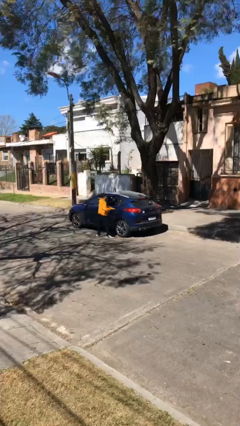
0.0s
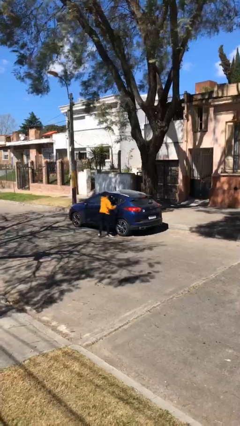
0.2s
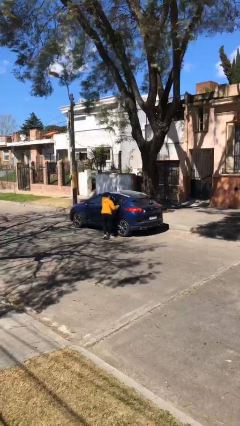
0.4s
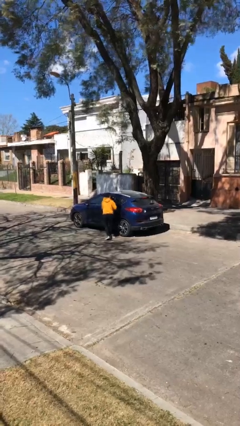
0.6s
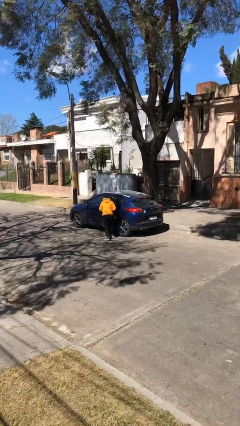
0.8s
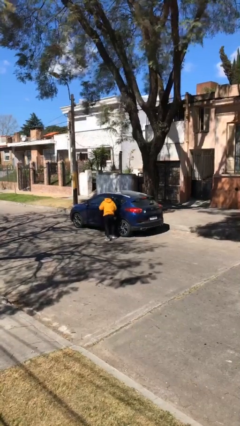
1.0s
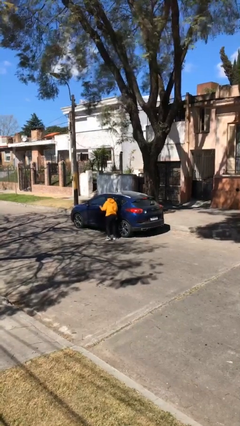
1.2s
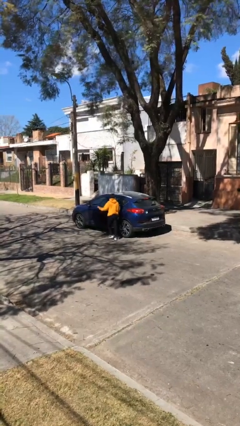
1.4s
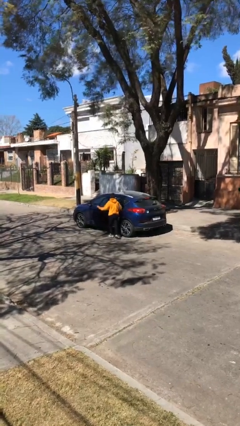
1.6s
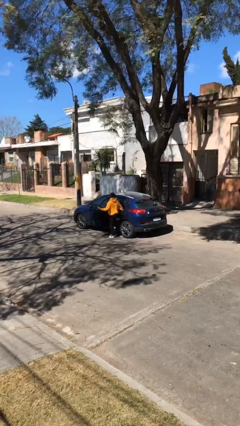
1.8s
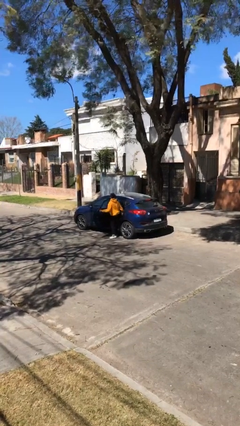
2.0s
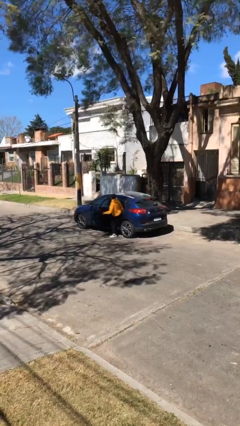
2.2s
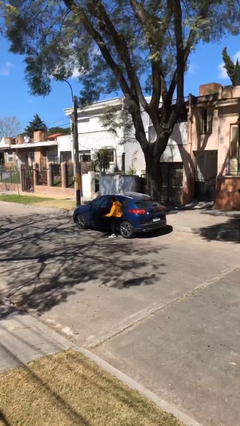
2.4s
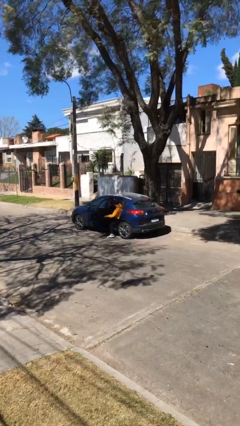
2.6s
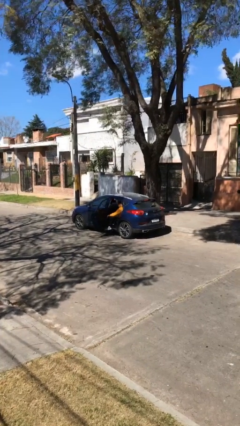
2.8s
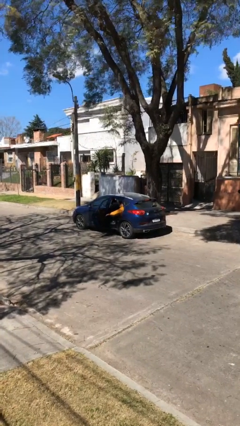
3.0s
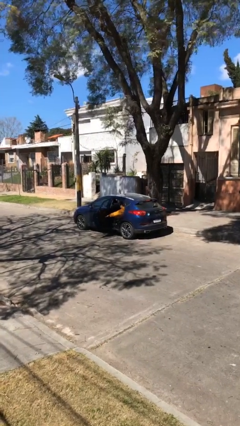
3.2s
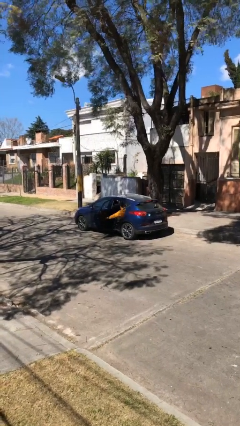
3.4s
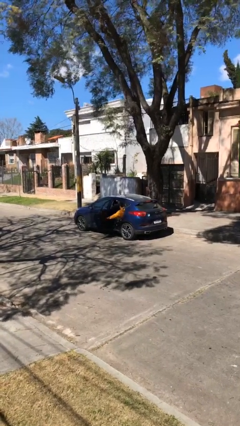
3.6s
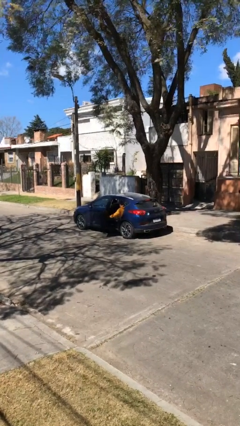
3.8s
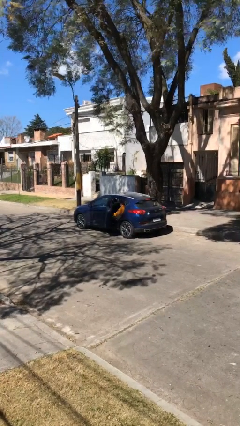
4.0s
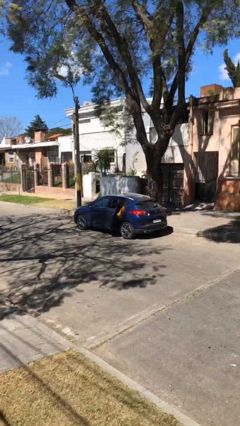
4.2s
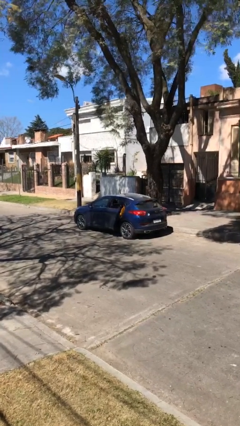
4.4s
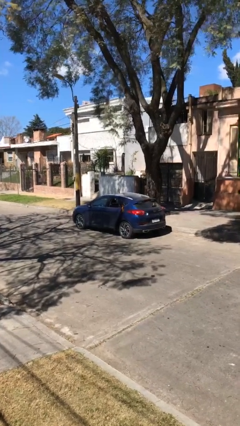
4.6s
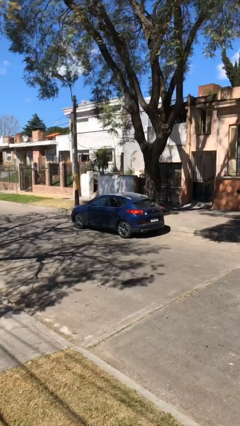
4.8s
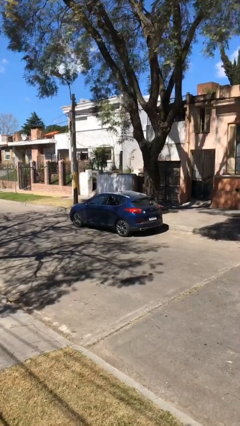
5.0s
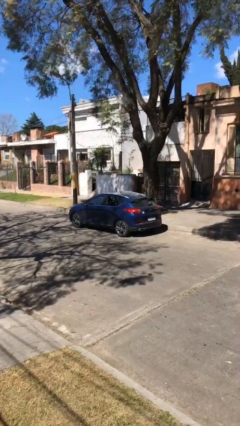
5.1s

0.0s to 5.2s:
car picks up person

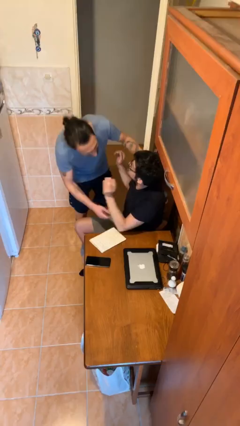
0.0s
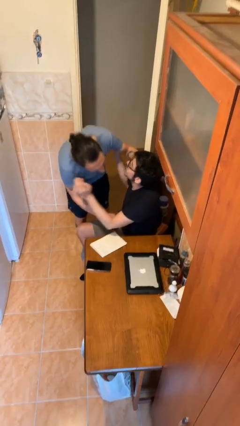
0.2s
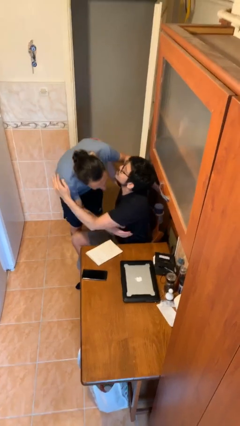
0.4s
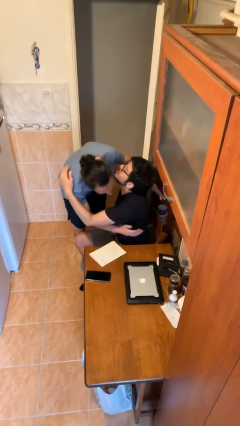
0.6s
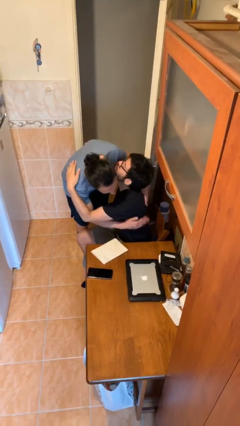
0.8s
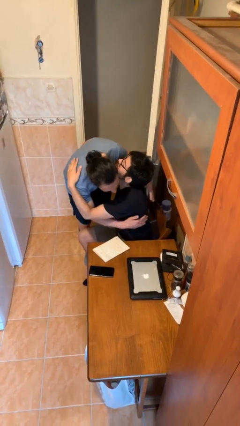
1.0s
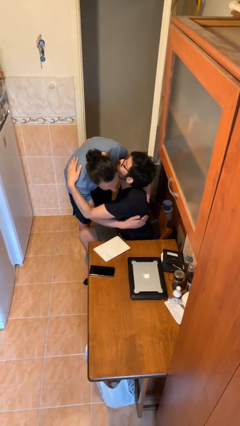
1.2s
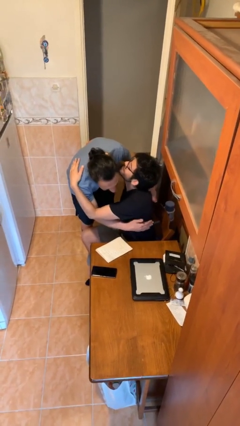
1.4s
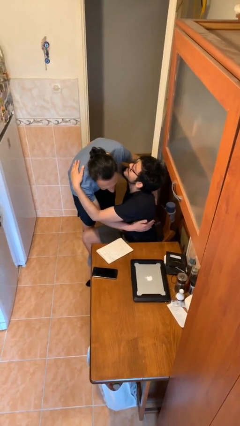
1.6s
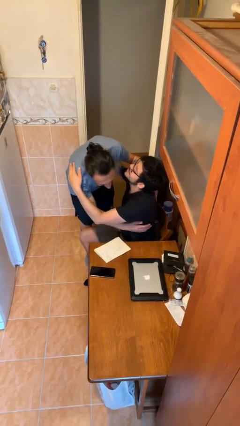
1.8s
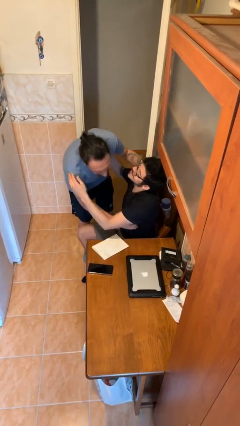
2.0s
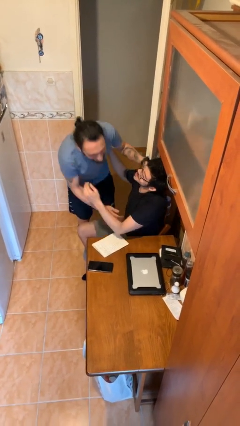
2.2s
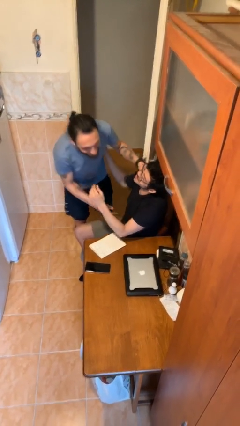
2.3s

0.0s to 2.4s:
person embraces person

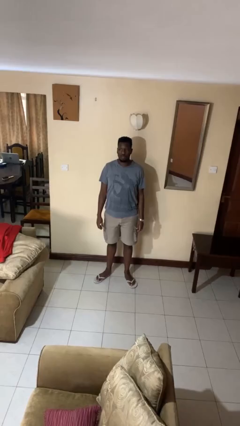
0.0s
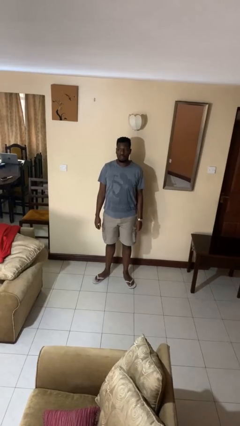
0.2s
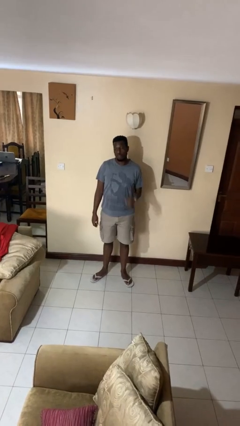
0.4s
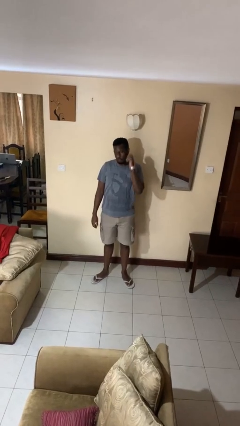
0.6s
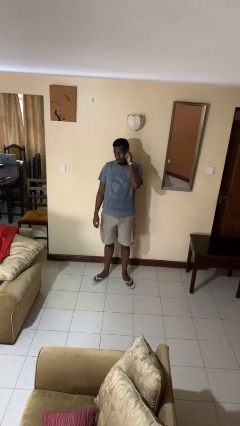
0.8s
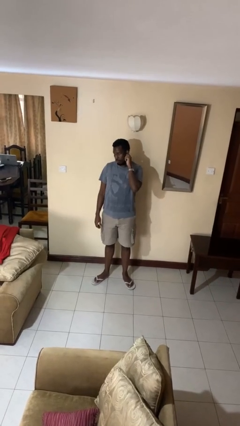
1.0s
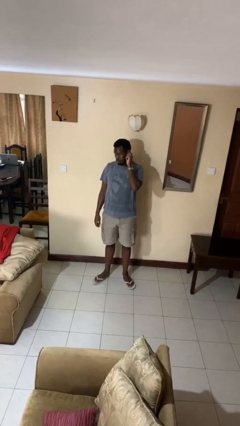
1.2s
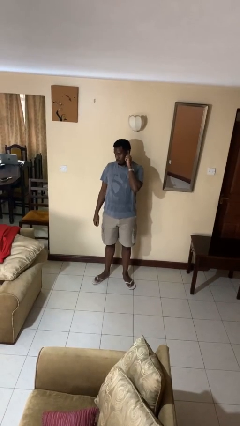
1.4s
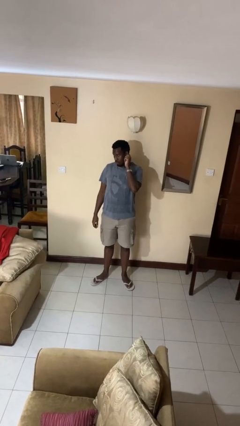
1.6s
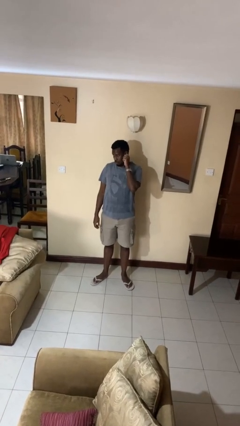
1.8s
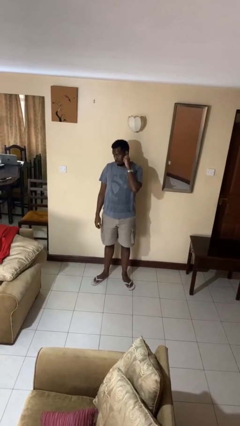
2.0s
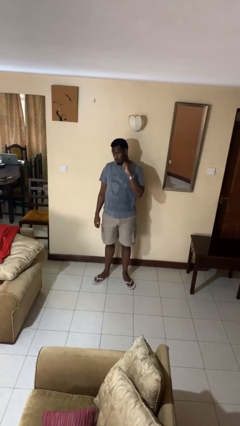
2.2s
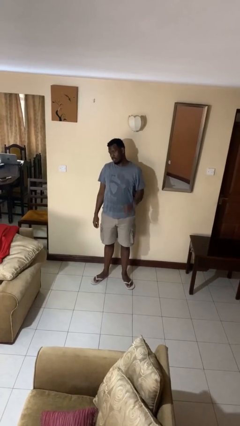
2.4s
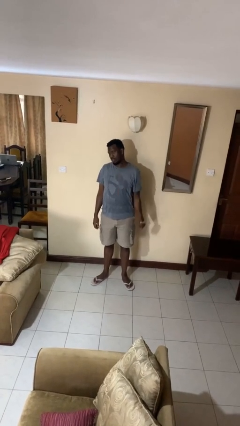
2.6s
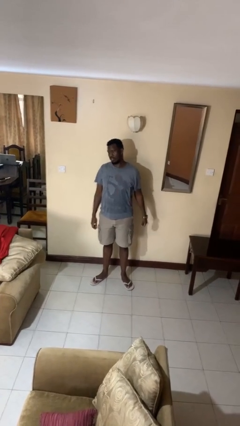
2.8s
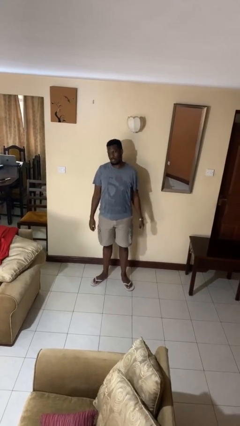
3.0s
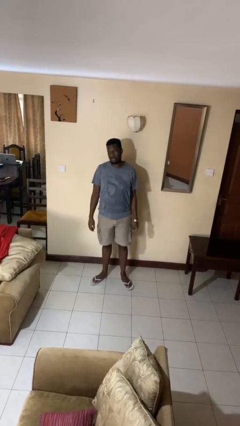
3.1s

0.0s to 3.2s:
person touches earlobe

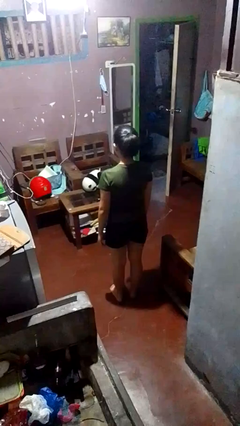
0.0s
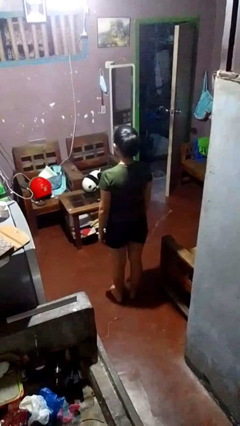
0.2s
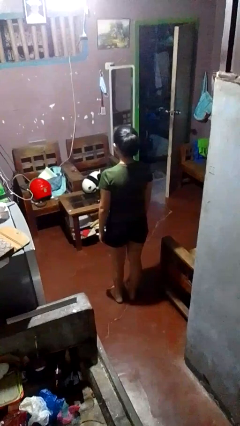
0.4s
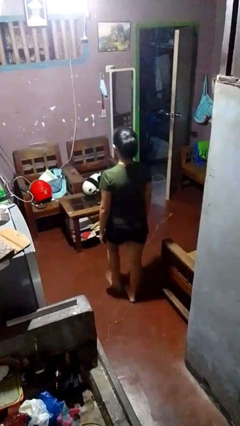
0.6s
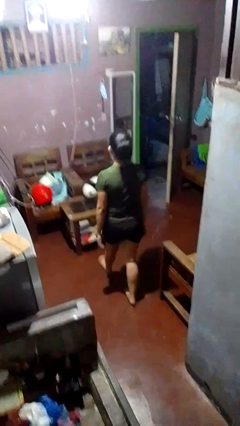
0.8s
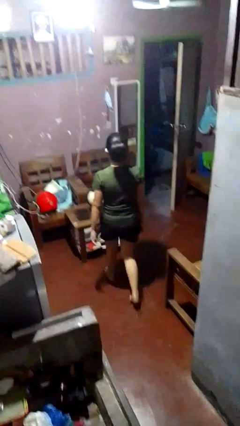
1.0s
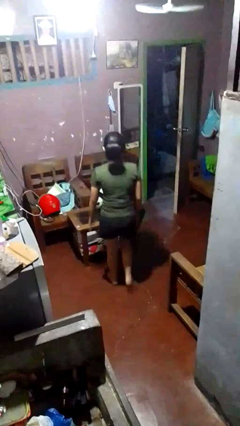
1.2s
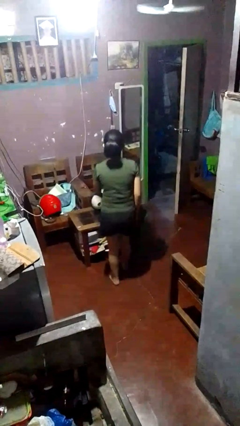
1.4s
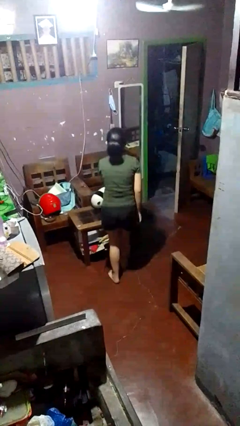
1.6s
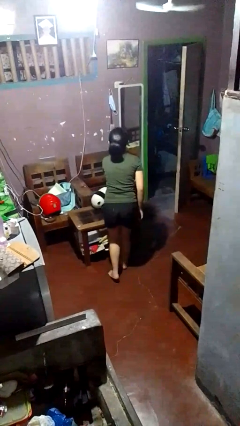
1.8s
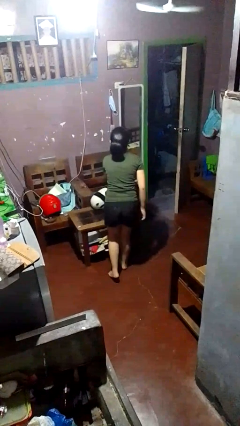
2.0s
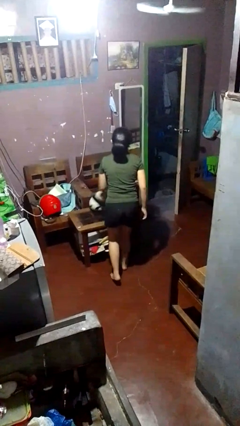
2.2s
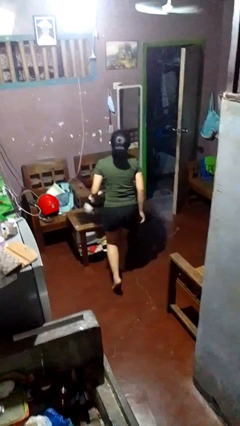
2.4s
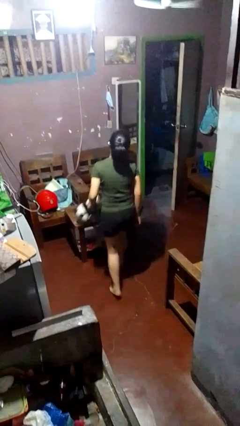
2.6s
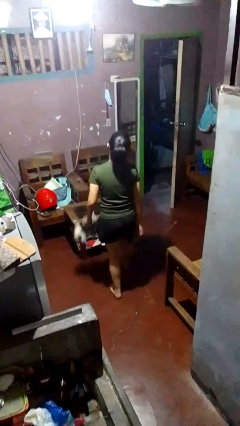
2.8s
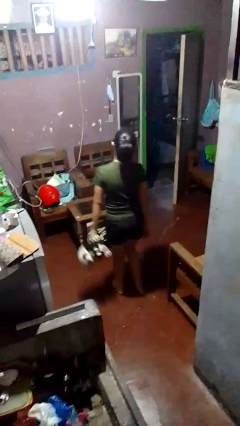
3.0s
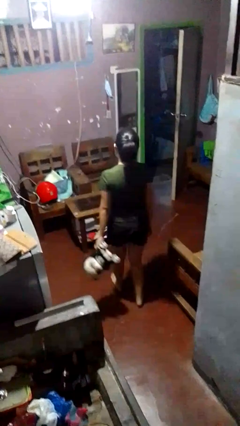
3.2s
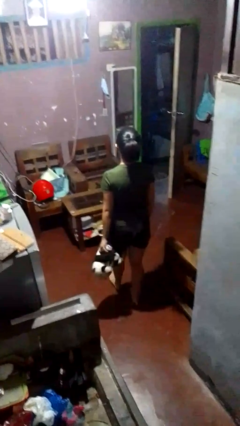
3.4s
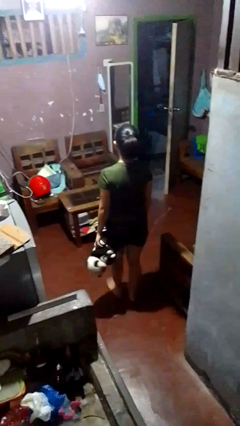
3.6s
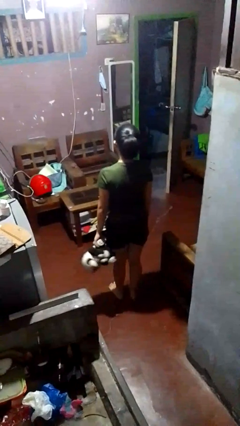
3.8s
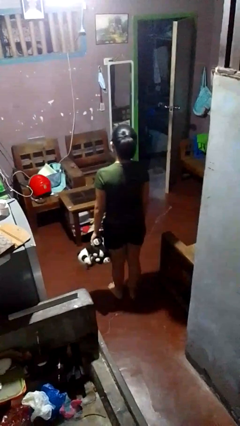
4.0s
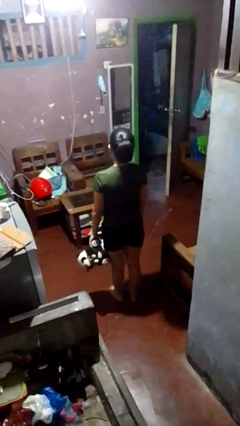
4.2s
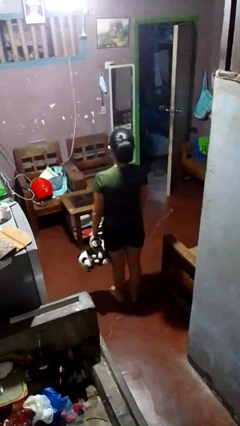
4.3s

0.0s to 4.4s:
person picks up object from table

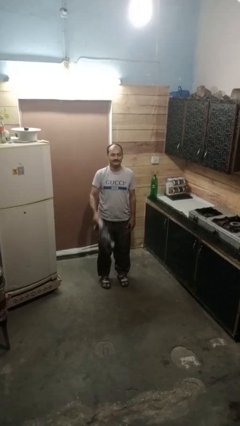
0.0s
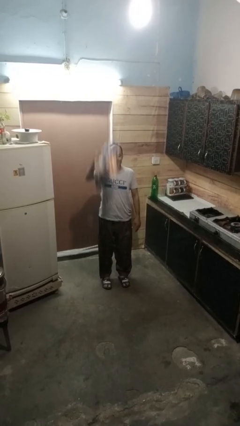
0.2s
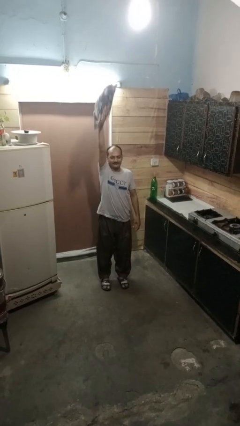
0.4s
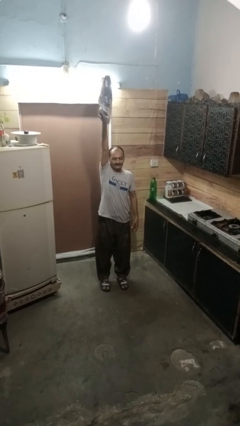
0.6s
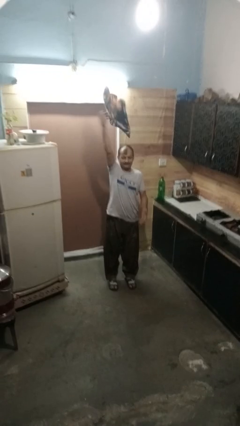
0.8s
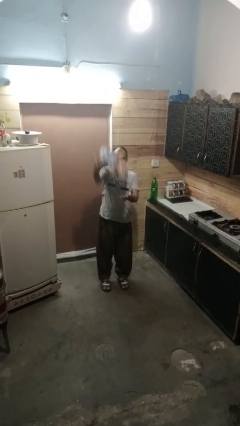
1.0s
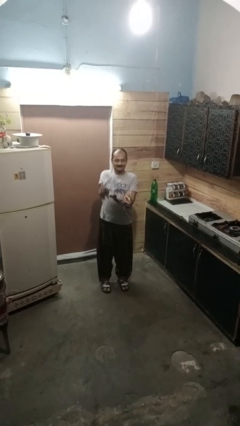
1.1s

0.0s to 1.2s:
person drops object

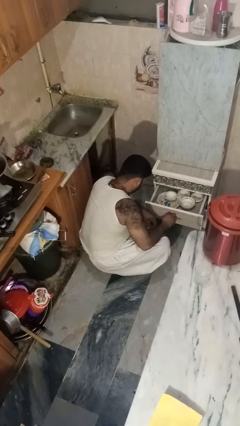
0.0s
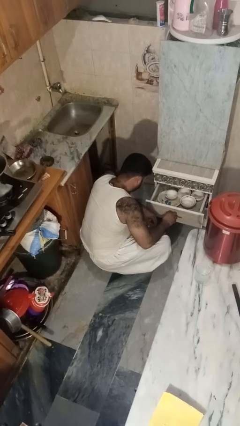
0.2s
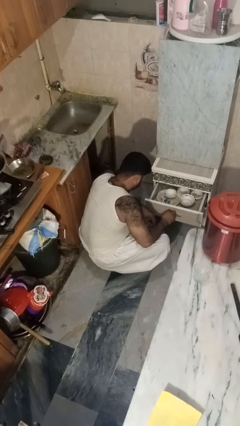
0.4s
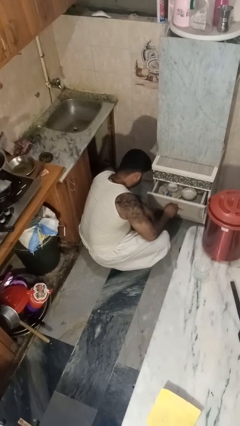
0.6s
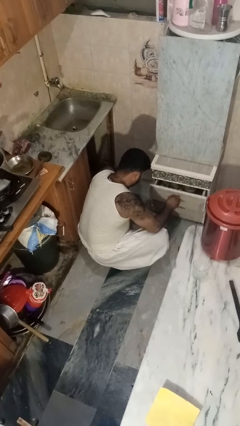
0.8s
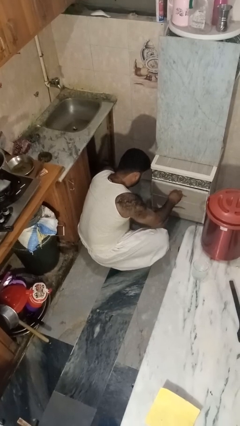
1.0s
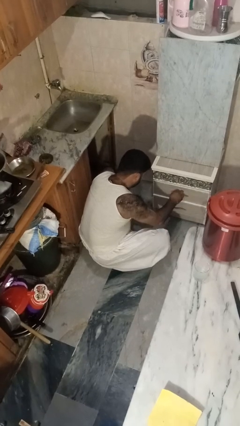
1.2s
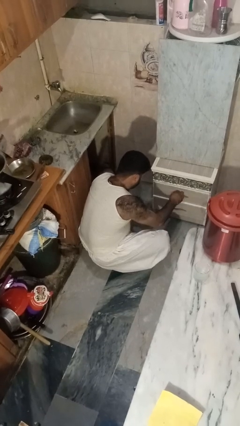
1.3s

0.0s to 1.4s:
person closes kitchen drawer
